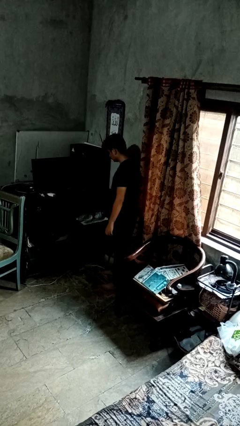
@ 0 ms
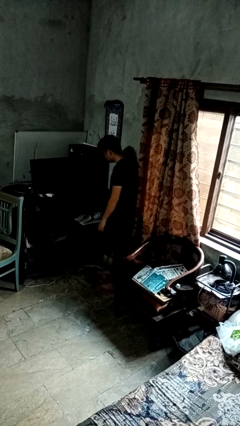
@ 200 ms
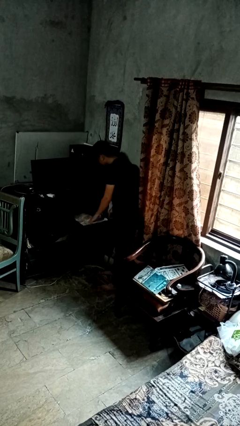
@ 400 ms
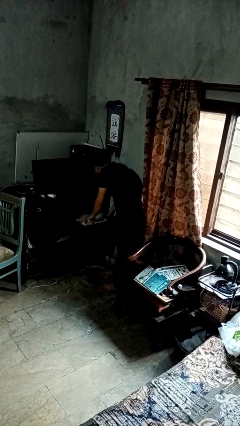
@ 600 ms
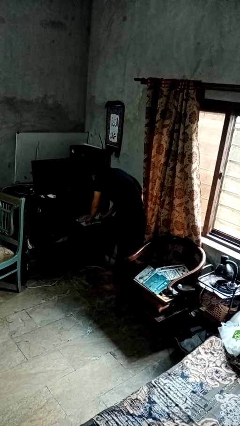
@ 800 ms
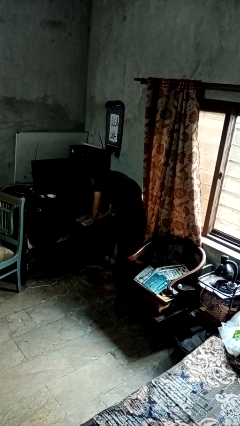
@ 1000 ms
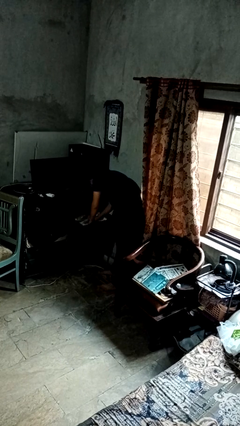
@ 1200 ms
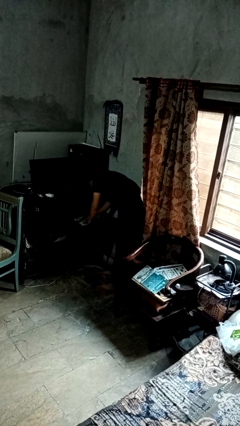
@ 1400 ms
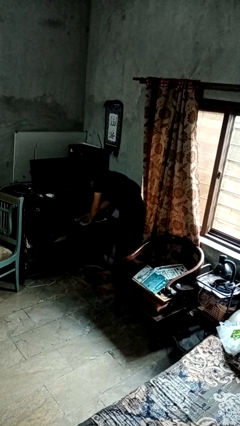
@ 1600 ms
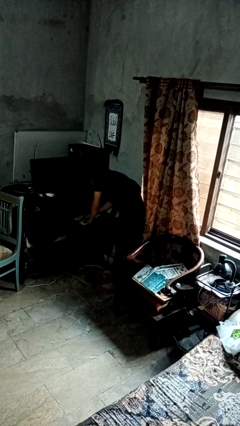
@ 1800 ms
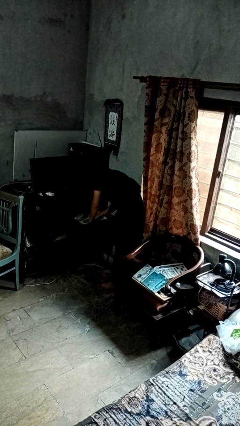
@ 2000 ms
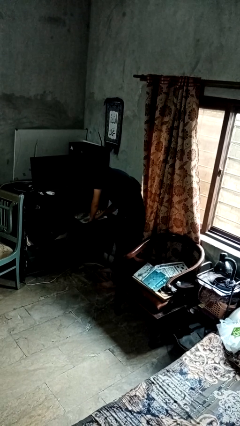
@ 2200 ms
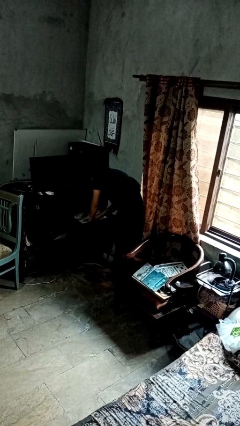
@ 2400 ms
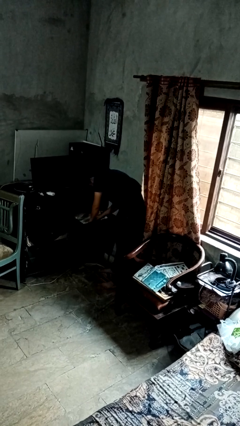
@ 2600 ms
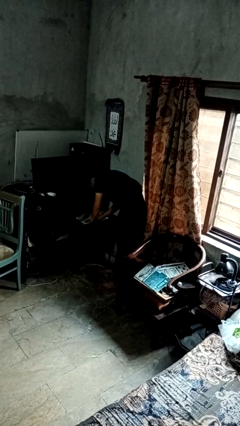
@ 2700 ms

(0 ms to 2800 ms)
person searches in cabinet

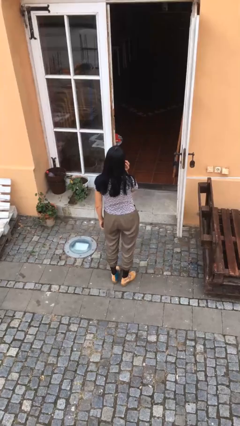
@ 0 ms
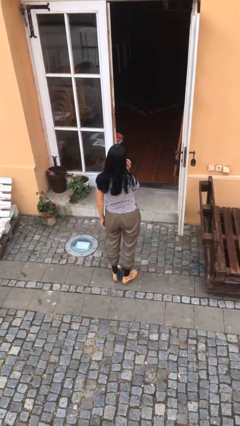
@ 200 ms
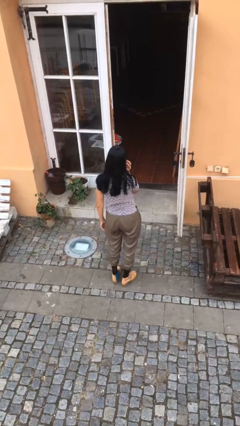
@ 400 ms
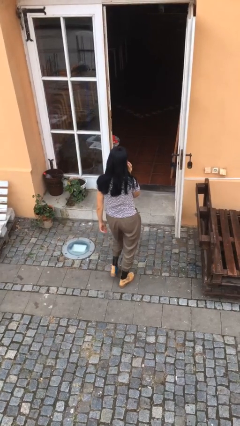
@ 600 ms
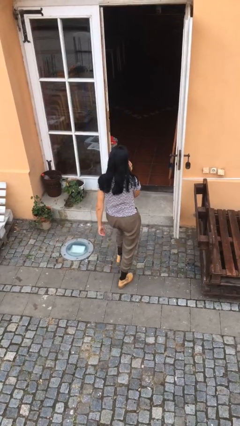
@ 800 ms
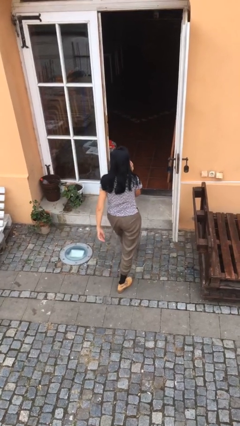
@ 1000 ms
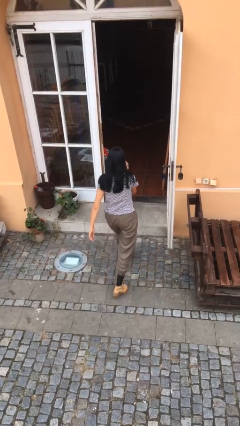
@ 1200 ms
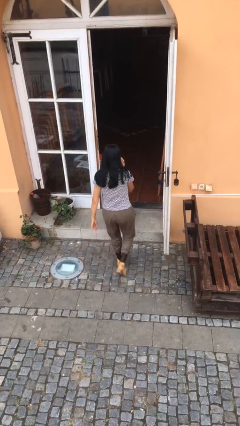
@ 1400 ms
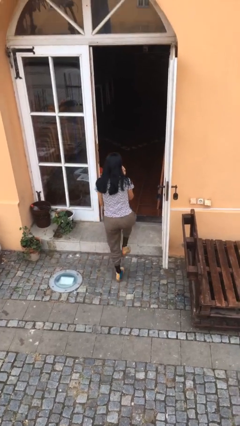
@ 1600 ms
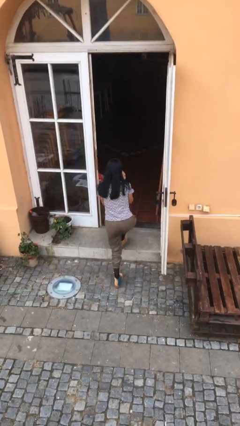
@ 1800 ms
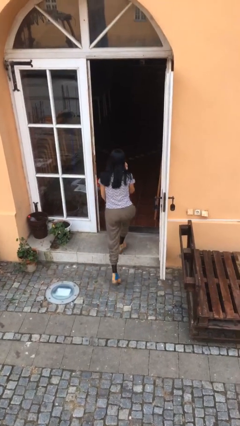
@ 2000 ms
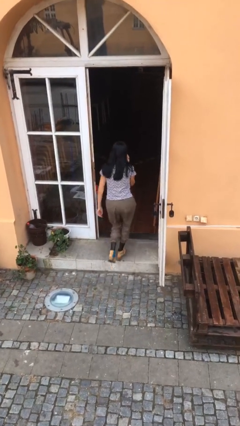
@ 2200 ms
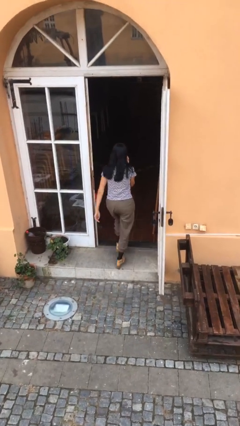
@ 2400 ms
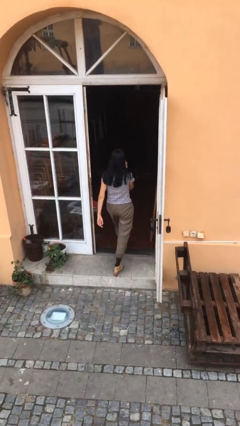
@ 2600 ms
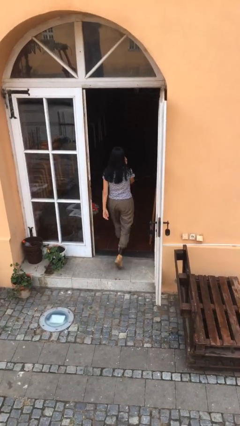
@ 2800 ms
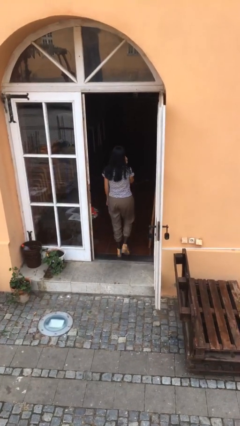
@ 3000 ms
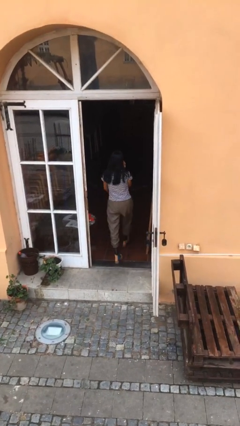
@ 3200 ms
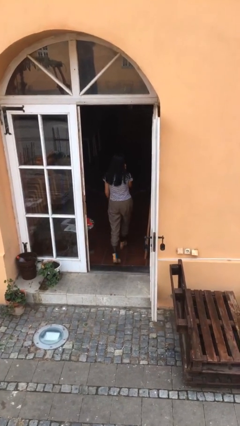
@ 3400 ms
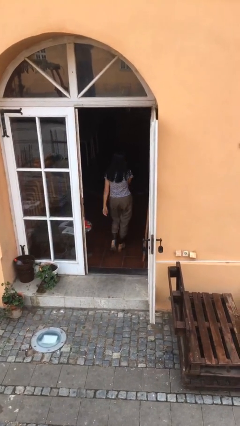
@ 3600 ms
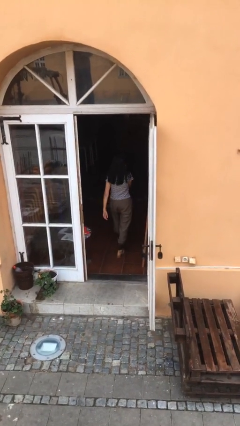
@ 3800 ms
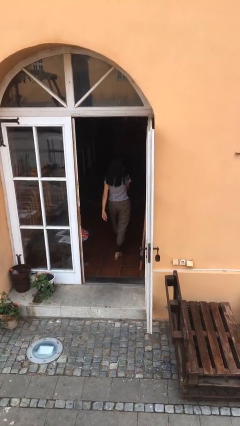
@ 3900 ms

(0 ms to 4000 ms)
person exits scene through structure

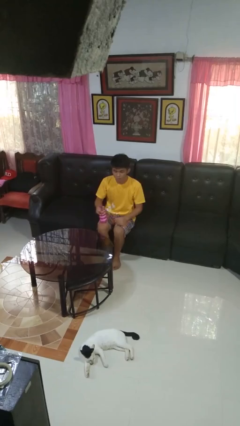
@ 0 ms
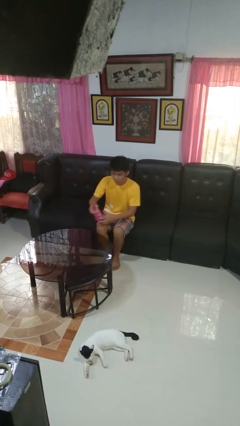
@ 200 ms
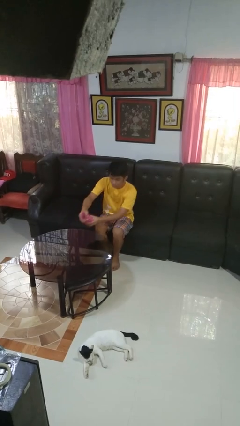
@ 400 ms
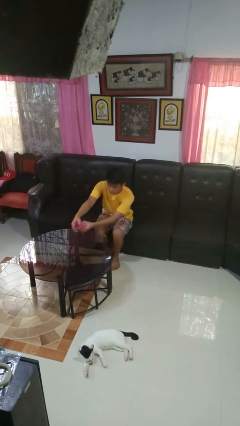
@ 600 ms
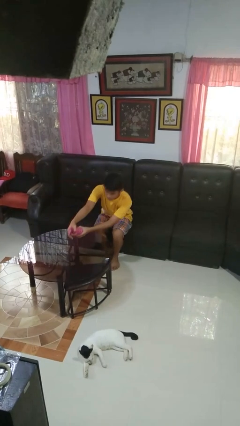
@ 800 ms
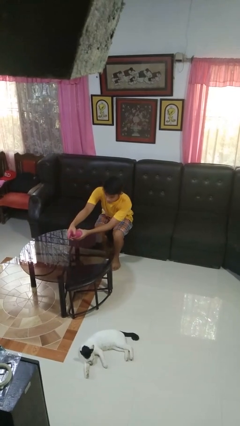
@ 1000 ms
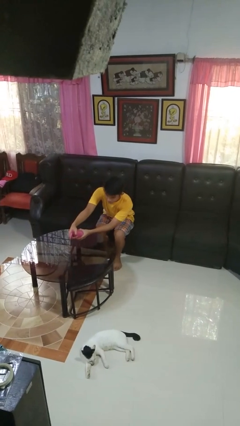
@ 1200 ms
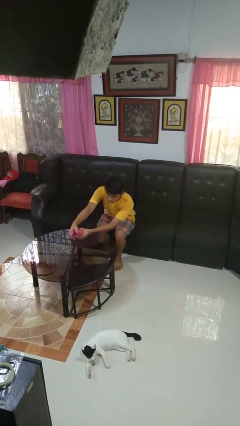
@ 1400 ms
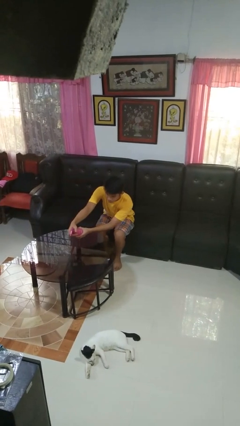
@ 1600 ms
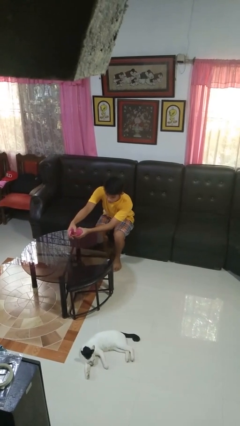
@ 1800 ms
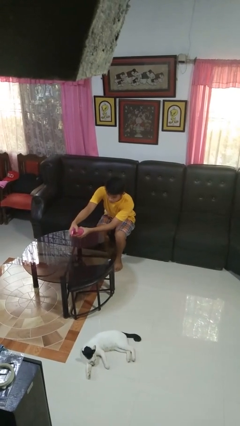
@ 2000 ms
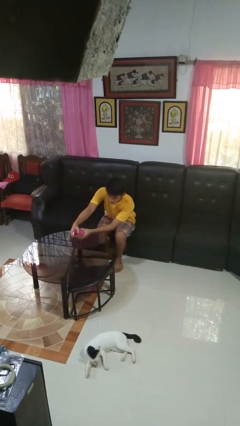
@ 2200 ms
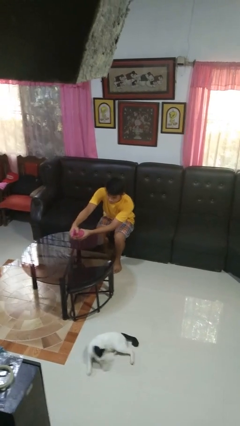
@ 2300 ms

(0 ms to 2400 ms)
person sprays from bottle

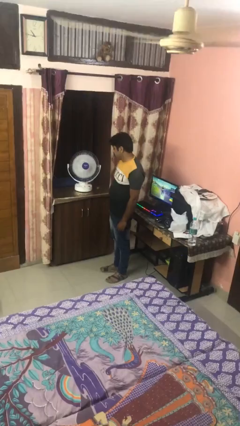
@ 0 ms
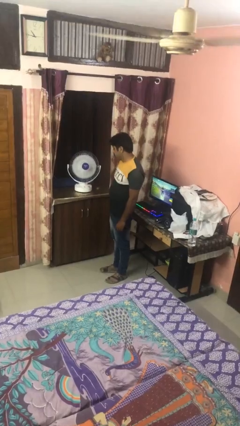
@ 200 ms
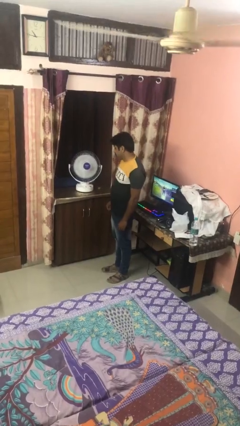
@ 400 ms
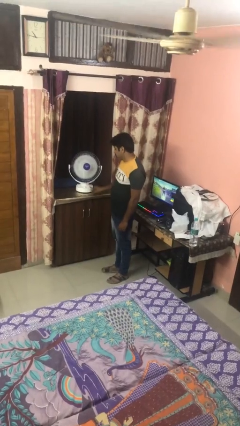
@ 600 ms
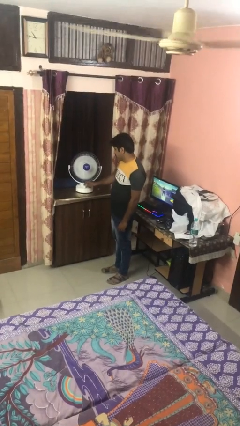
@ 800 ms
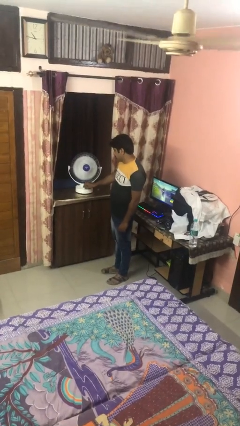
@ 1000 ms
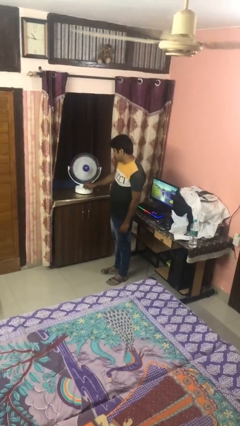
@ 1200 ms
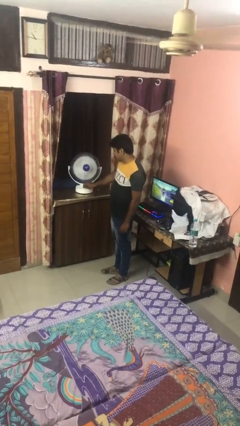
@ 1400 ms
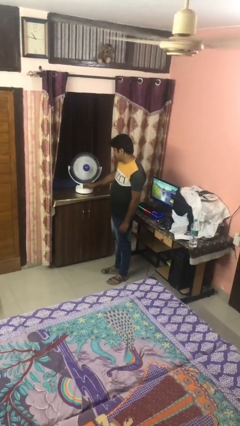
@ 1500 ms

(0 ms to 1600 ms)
person turns off fan

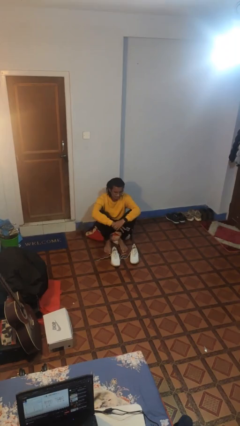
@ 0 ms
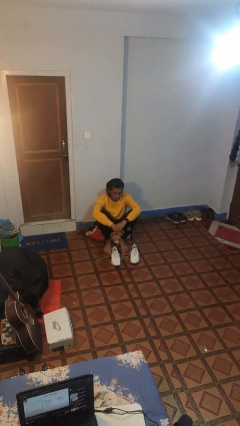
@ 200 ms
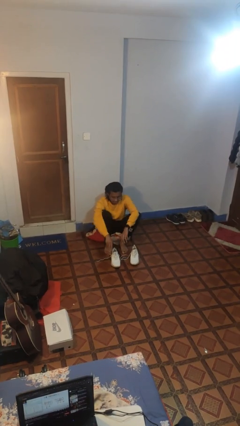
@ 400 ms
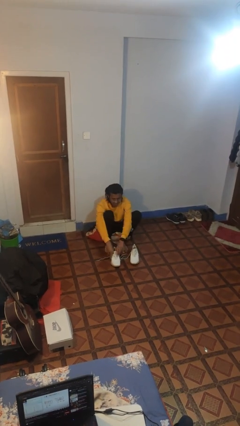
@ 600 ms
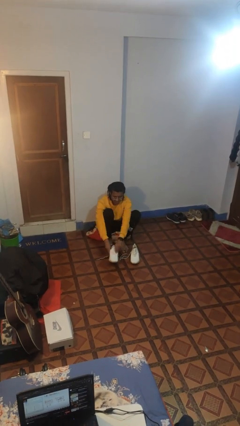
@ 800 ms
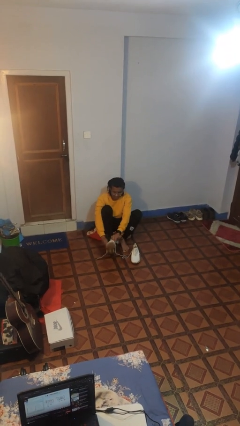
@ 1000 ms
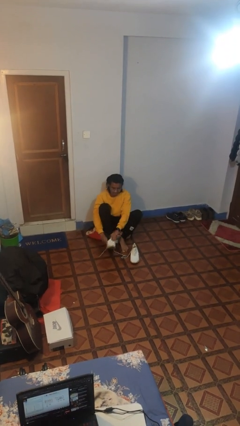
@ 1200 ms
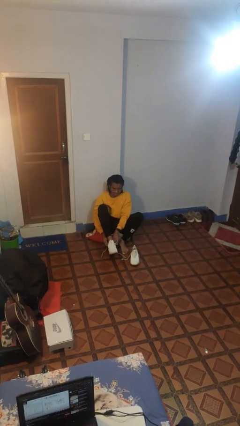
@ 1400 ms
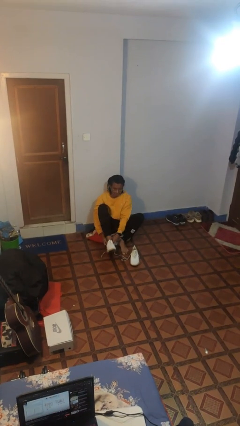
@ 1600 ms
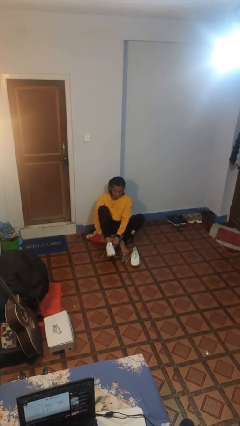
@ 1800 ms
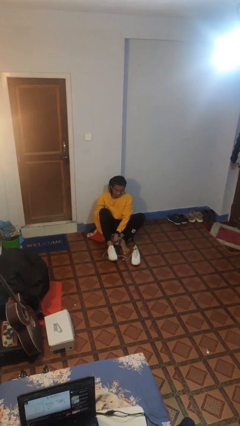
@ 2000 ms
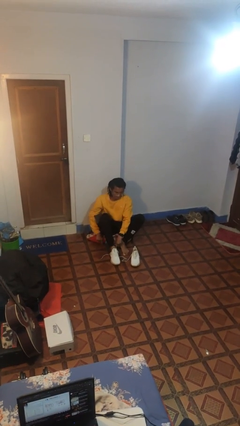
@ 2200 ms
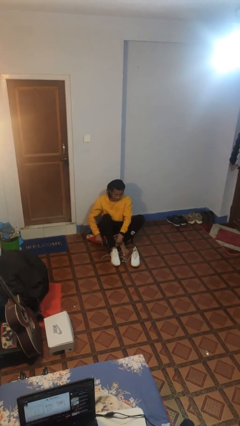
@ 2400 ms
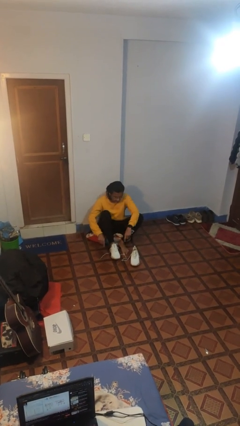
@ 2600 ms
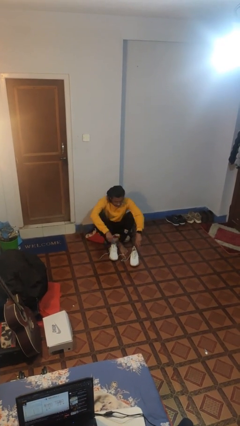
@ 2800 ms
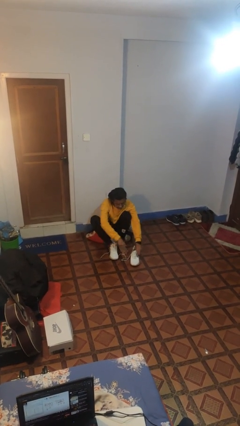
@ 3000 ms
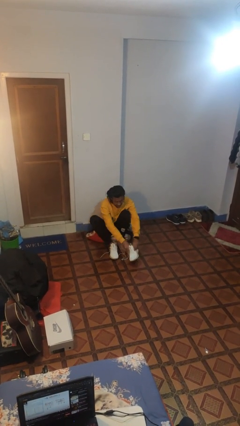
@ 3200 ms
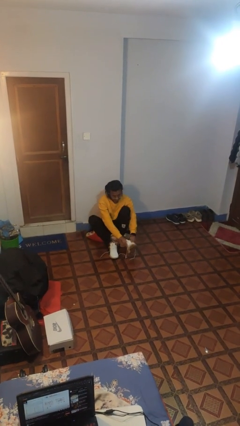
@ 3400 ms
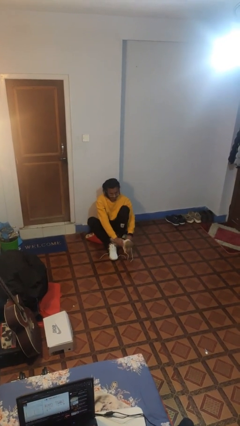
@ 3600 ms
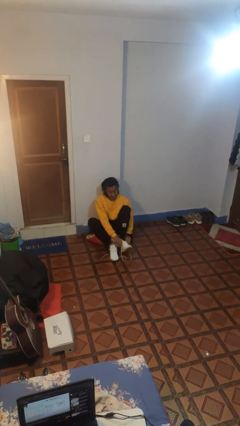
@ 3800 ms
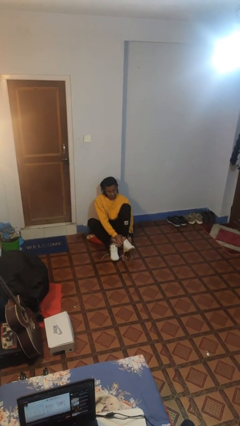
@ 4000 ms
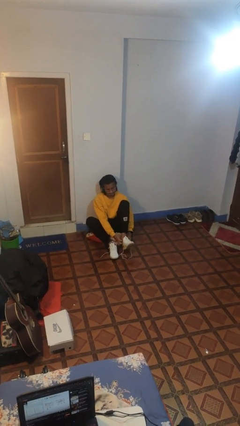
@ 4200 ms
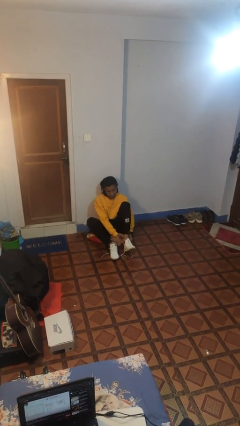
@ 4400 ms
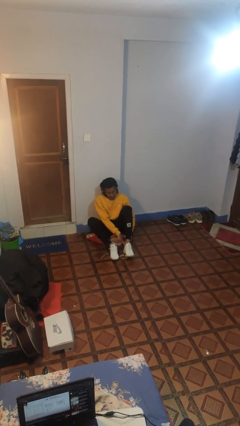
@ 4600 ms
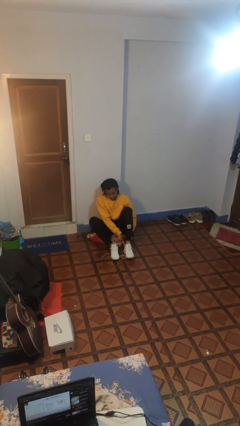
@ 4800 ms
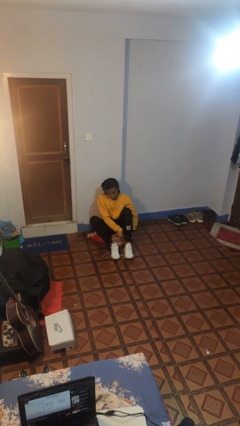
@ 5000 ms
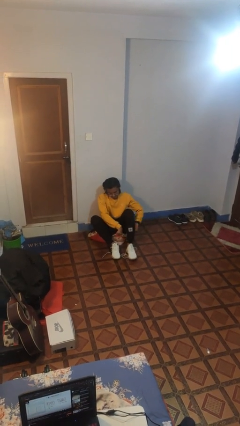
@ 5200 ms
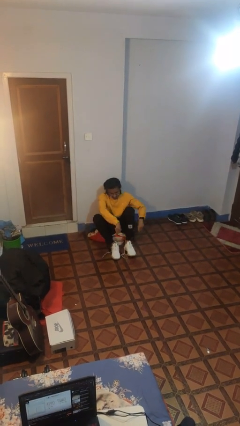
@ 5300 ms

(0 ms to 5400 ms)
person puts on shoes

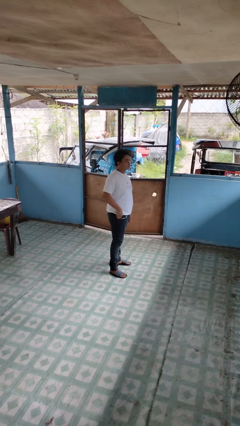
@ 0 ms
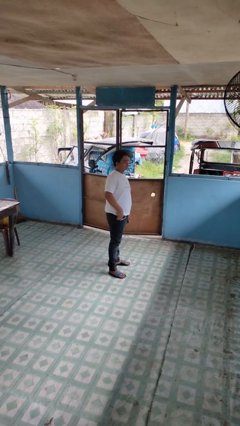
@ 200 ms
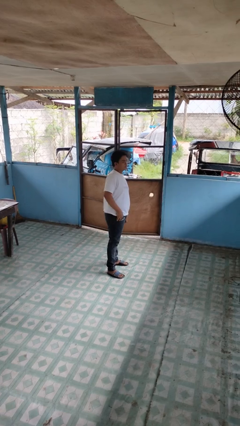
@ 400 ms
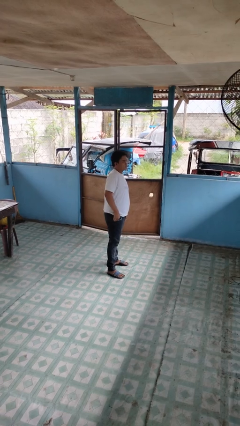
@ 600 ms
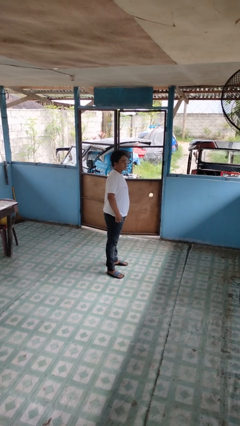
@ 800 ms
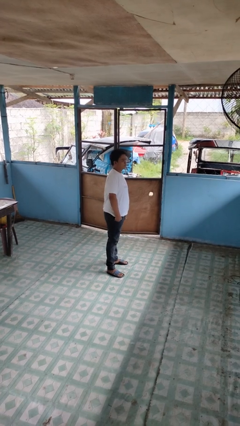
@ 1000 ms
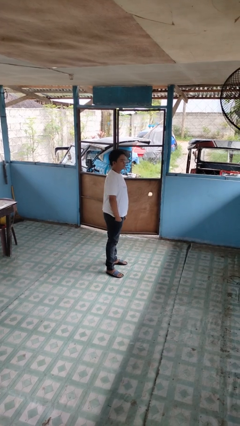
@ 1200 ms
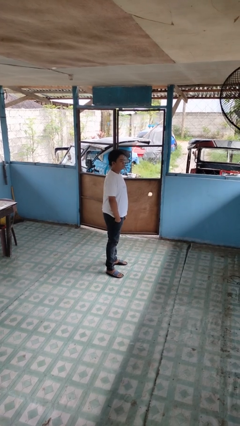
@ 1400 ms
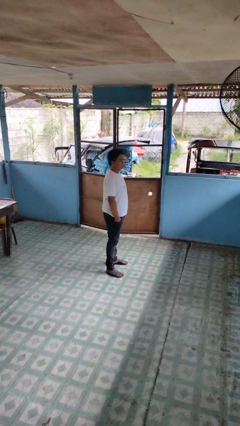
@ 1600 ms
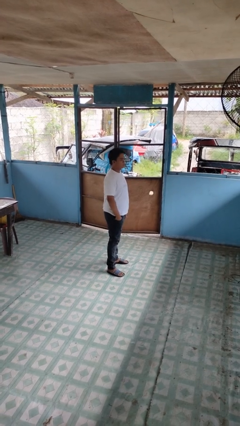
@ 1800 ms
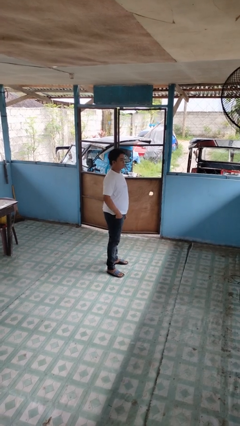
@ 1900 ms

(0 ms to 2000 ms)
person puts hands in back pockets
